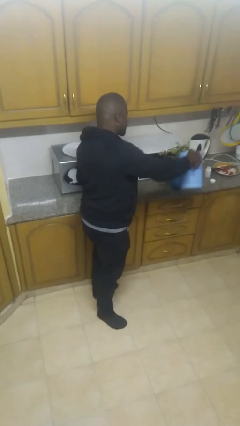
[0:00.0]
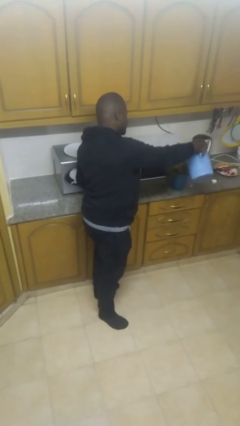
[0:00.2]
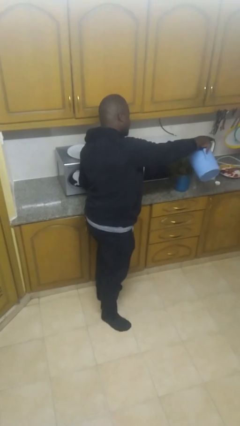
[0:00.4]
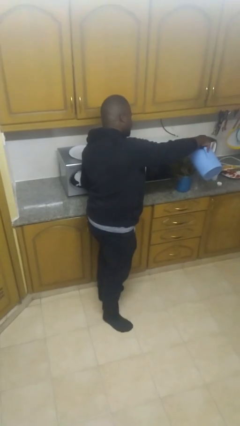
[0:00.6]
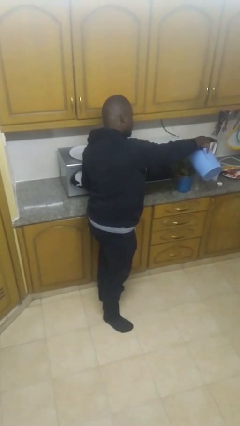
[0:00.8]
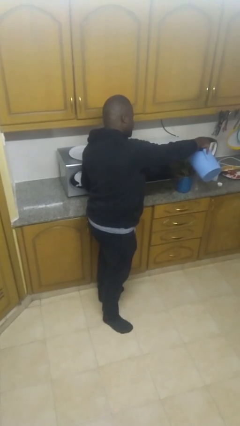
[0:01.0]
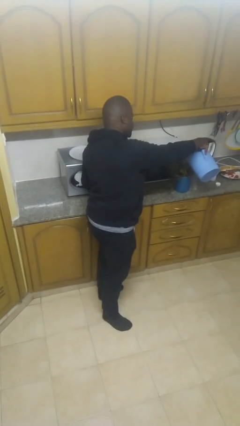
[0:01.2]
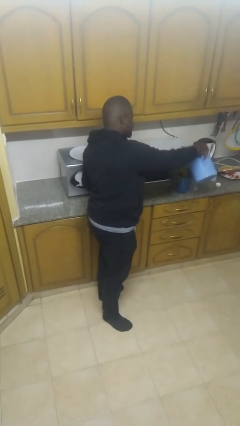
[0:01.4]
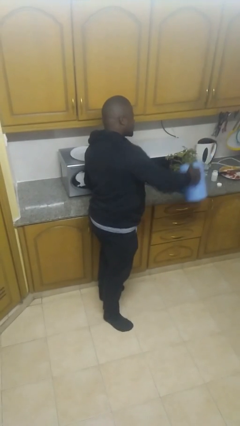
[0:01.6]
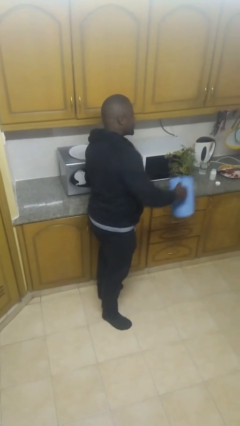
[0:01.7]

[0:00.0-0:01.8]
person waters houseplant

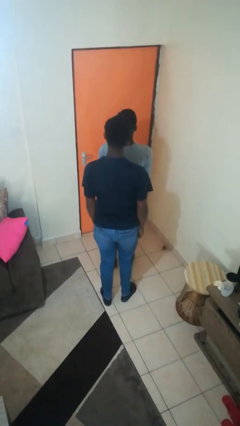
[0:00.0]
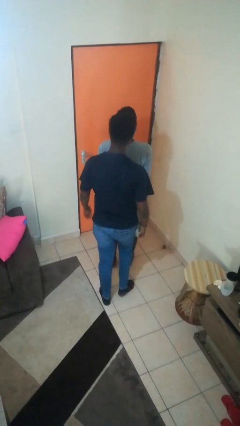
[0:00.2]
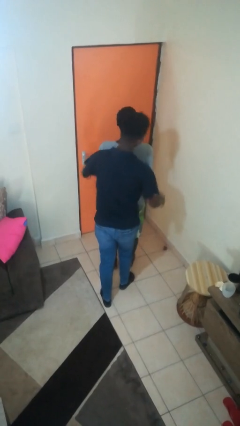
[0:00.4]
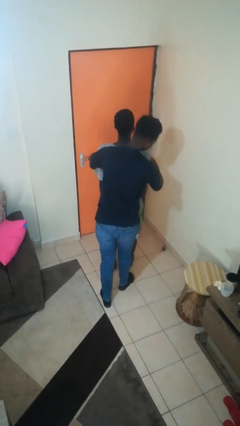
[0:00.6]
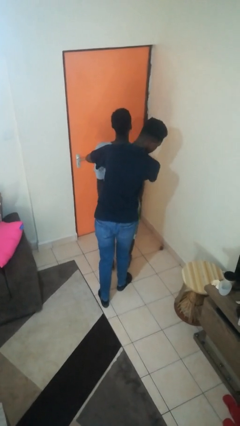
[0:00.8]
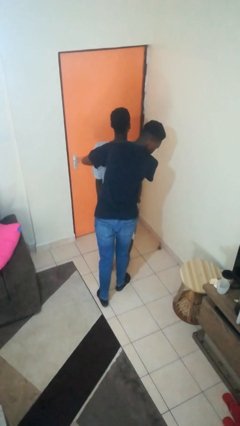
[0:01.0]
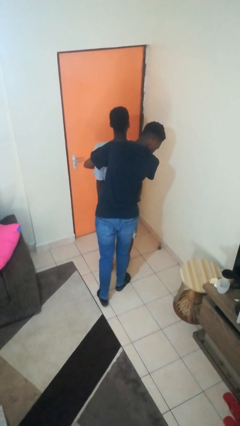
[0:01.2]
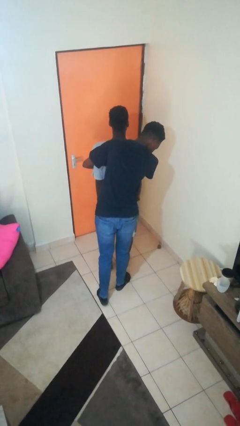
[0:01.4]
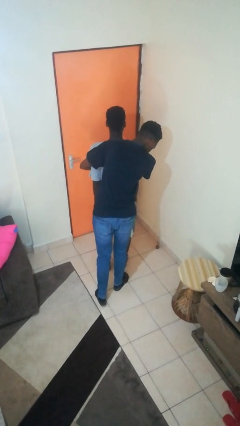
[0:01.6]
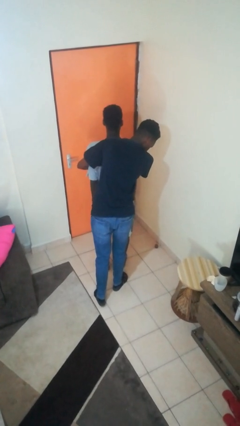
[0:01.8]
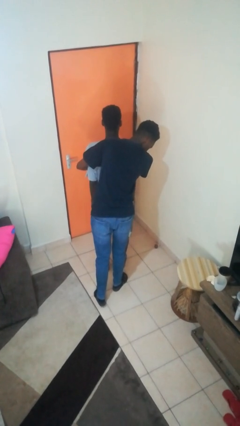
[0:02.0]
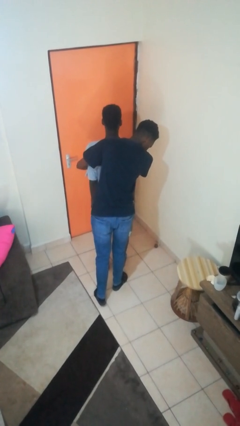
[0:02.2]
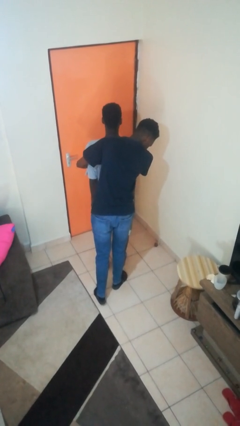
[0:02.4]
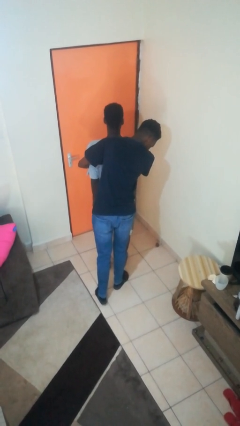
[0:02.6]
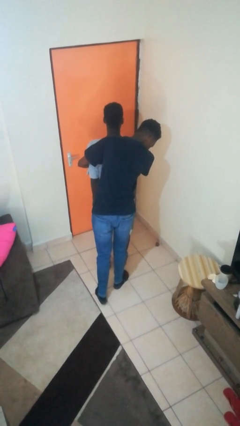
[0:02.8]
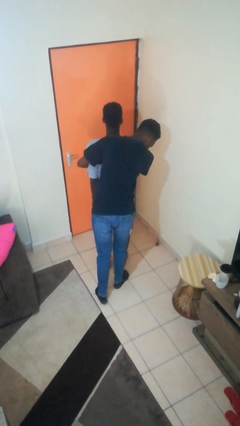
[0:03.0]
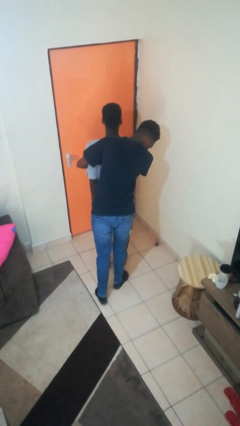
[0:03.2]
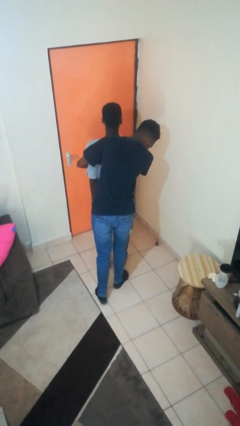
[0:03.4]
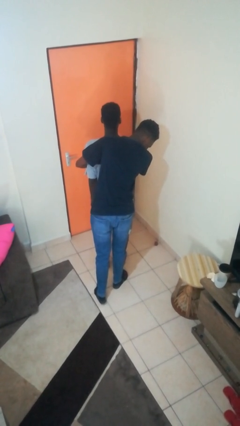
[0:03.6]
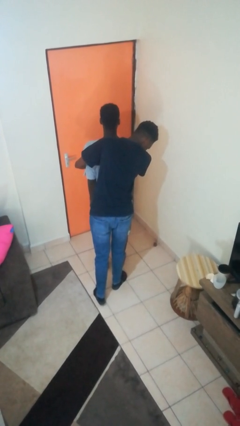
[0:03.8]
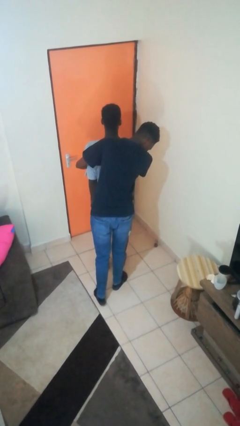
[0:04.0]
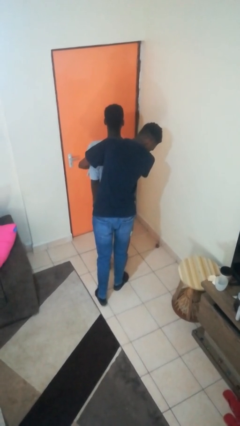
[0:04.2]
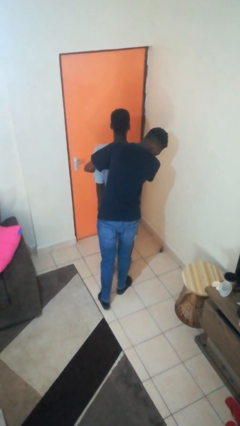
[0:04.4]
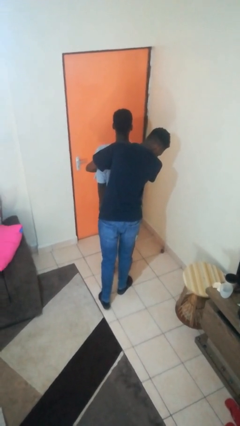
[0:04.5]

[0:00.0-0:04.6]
person hugs person from behind

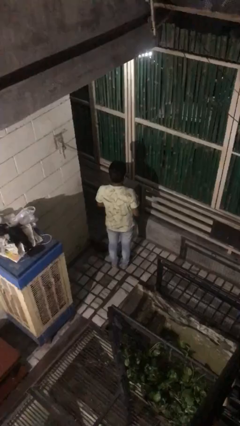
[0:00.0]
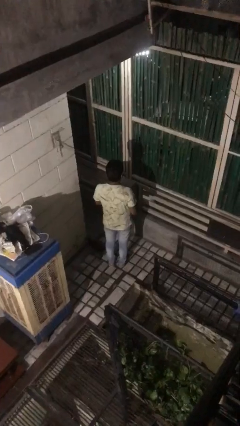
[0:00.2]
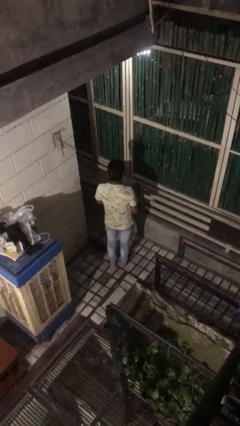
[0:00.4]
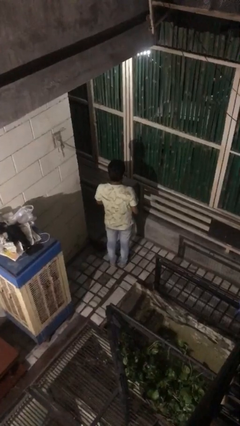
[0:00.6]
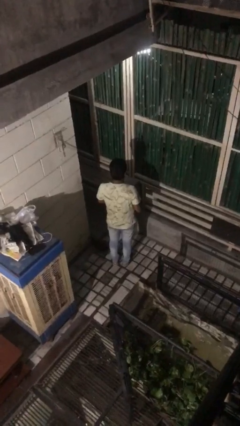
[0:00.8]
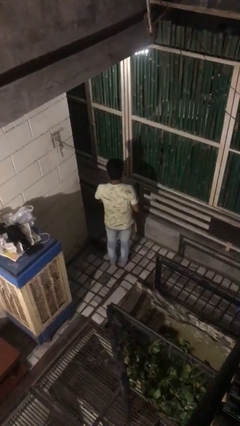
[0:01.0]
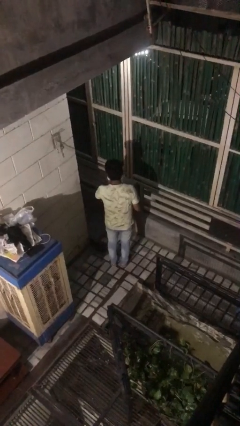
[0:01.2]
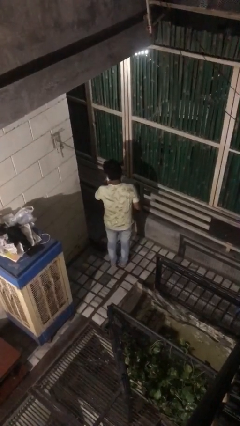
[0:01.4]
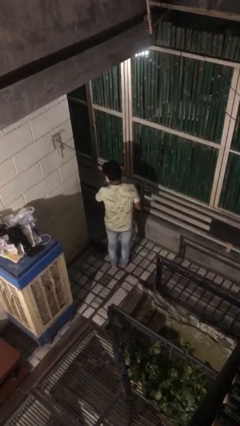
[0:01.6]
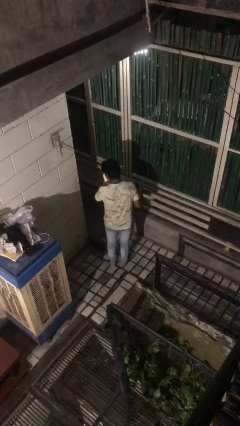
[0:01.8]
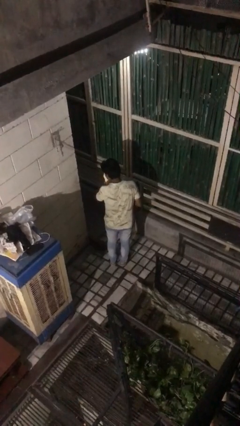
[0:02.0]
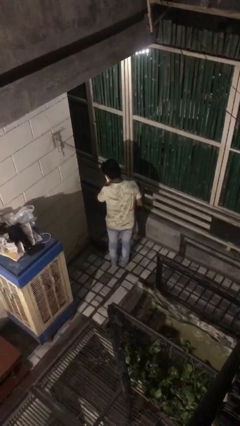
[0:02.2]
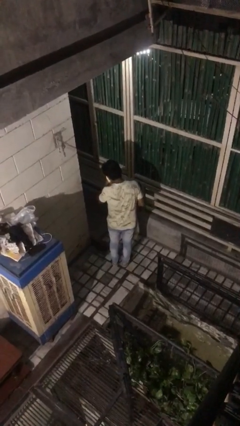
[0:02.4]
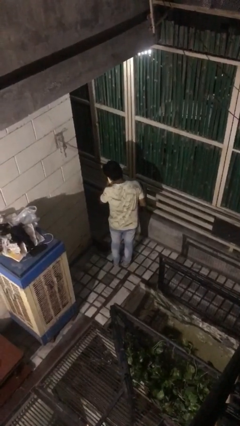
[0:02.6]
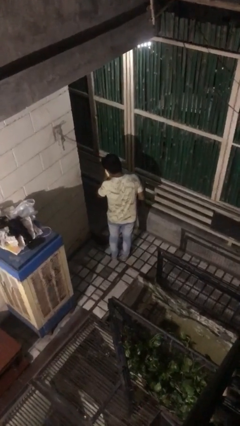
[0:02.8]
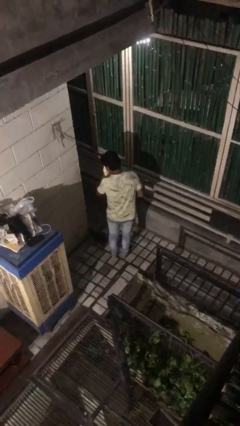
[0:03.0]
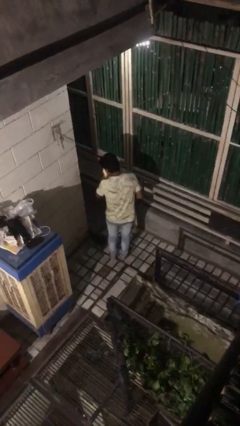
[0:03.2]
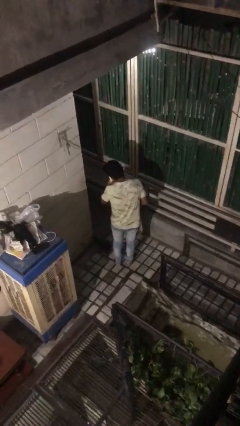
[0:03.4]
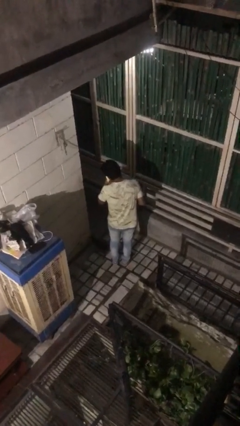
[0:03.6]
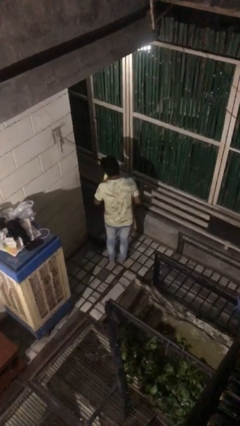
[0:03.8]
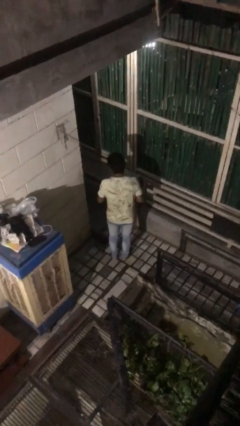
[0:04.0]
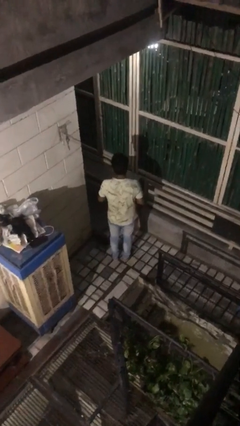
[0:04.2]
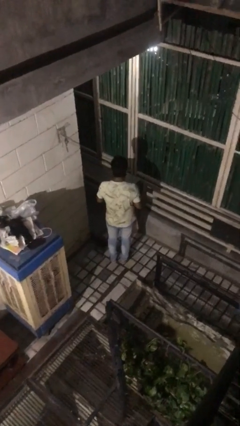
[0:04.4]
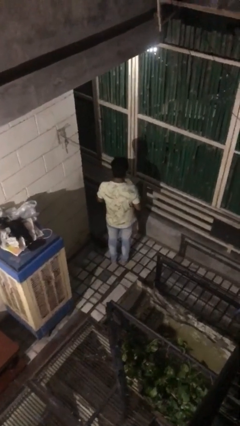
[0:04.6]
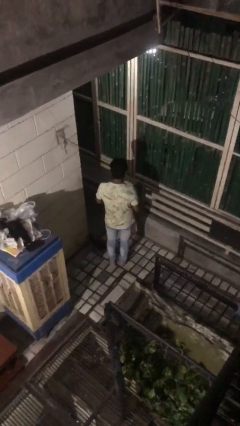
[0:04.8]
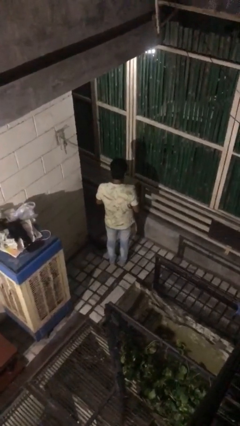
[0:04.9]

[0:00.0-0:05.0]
person blows nose

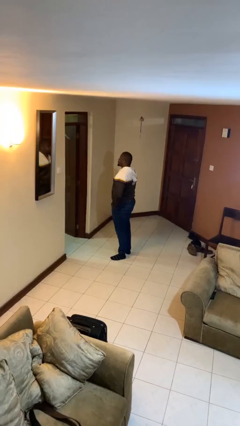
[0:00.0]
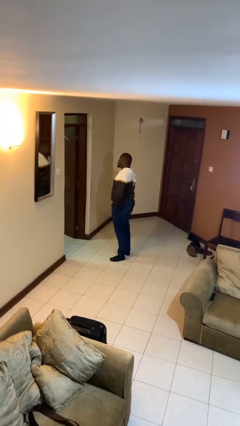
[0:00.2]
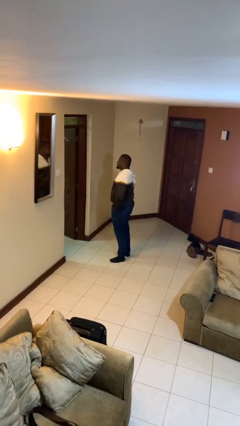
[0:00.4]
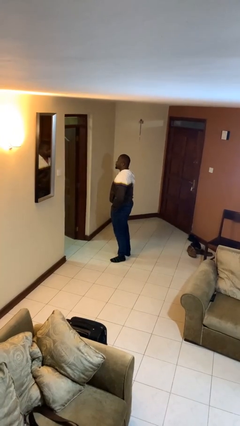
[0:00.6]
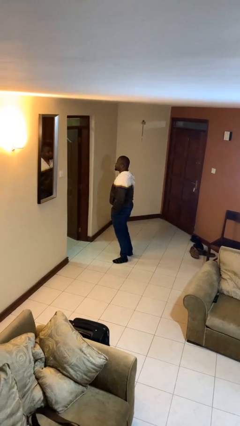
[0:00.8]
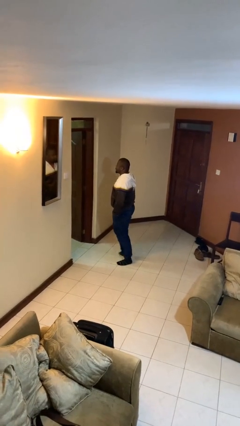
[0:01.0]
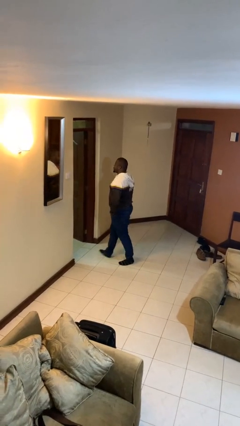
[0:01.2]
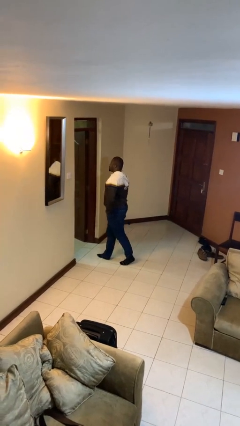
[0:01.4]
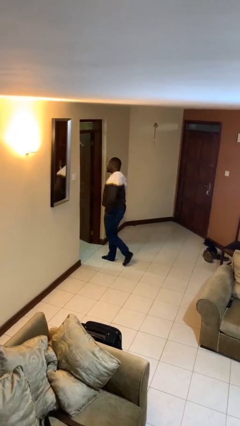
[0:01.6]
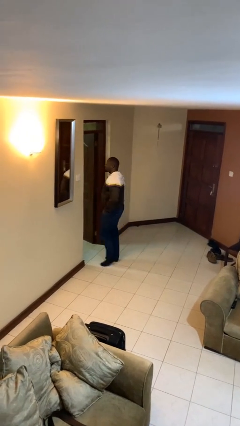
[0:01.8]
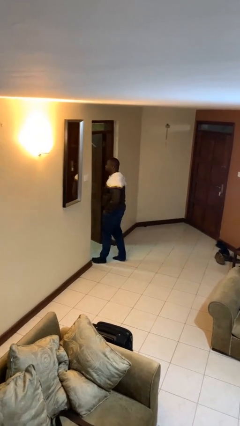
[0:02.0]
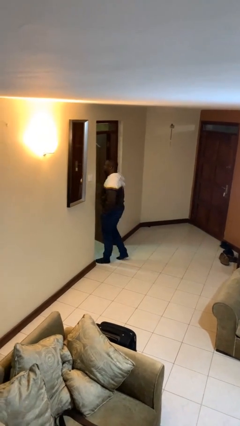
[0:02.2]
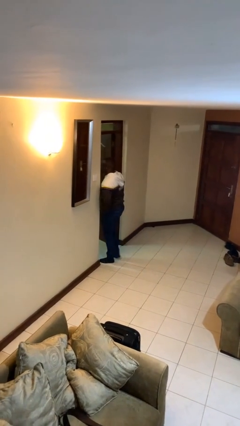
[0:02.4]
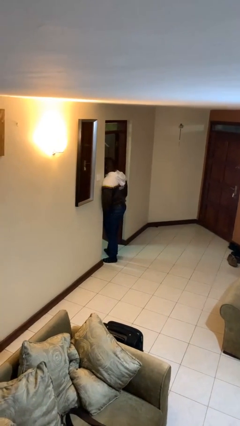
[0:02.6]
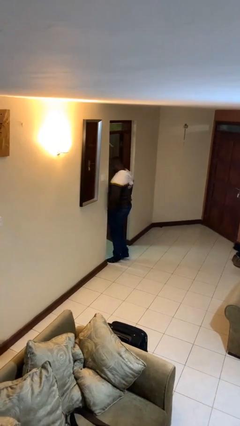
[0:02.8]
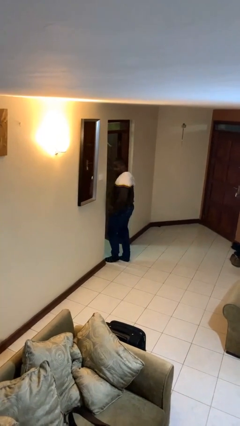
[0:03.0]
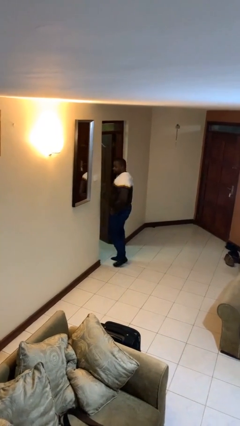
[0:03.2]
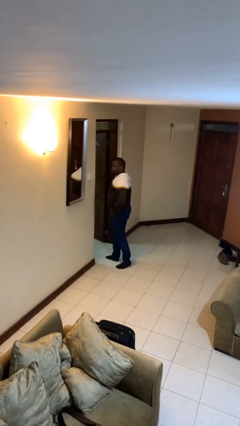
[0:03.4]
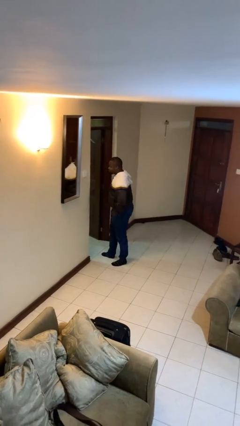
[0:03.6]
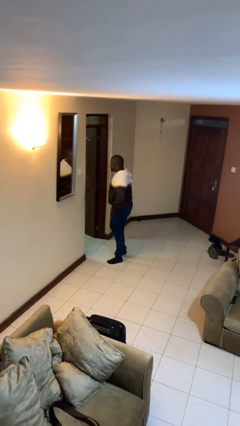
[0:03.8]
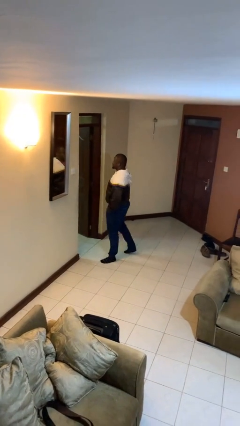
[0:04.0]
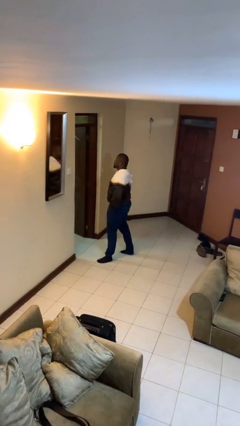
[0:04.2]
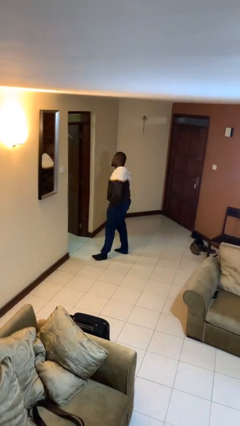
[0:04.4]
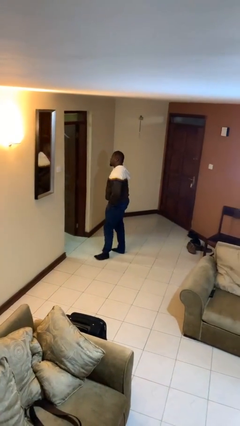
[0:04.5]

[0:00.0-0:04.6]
person bumps into wall

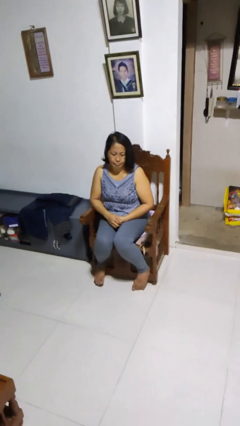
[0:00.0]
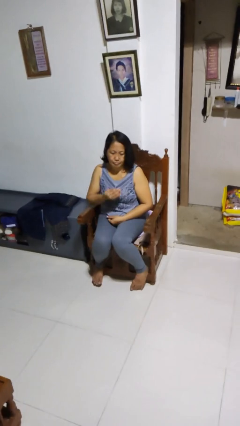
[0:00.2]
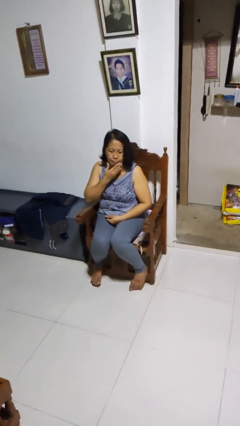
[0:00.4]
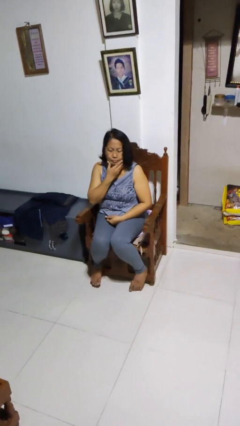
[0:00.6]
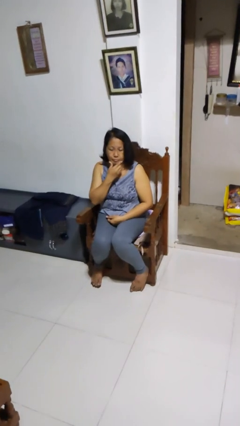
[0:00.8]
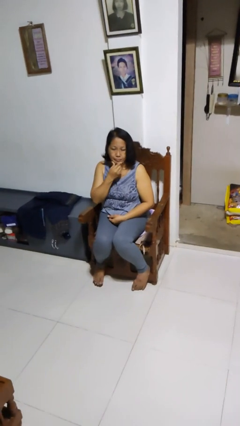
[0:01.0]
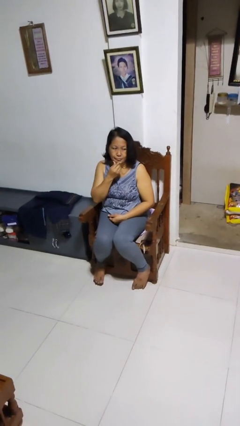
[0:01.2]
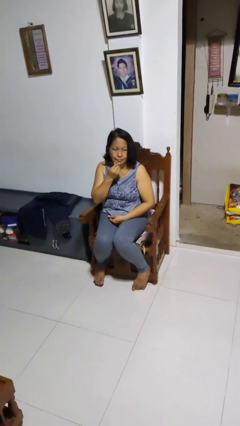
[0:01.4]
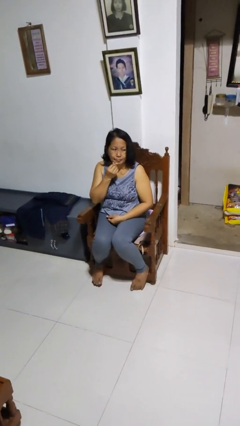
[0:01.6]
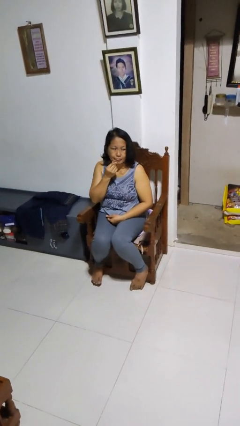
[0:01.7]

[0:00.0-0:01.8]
person strokes chin
